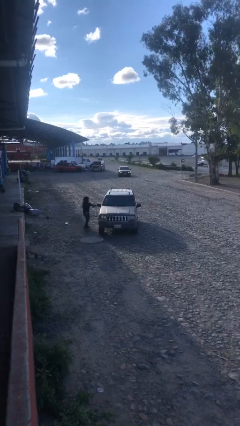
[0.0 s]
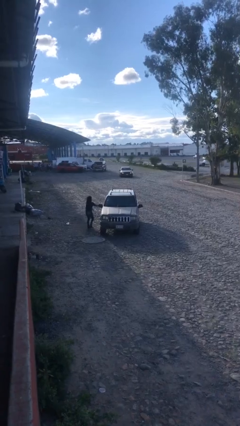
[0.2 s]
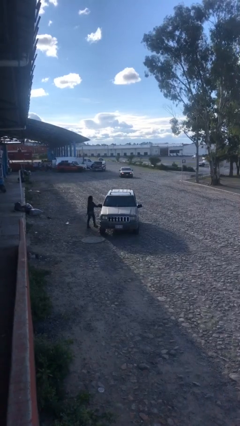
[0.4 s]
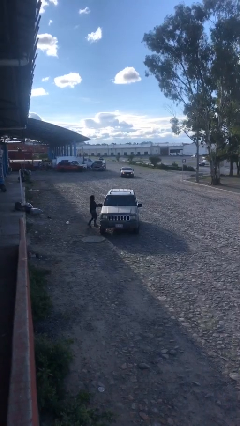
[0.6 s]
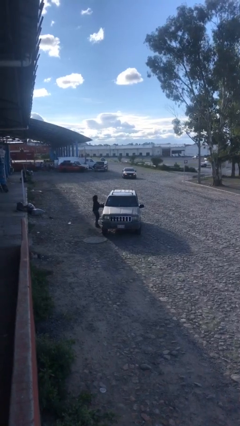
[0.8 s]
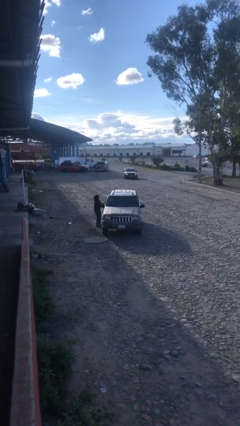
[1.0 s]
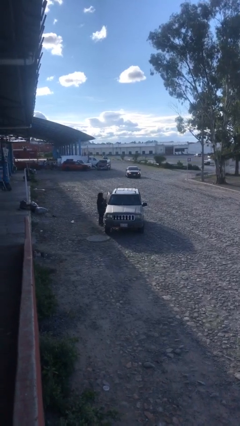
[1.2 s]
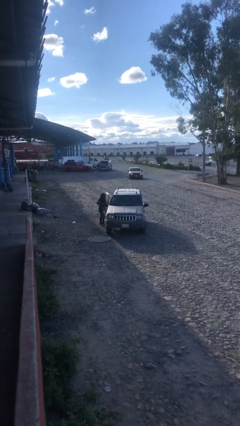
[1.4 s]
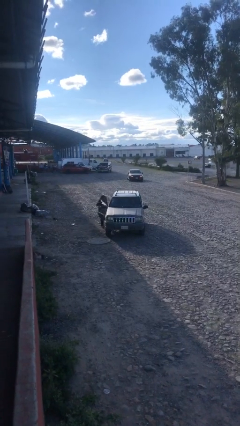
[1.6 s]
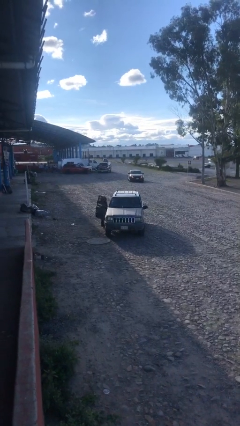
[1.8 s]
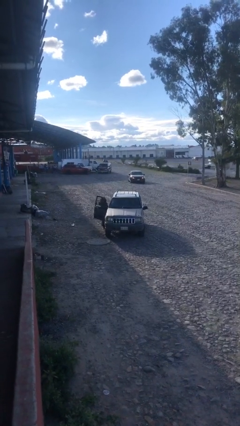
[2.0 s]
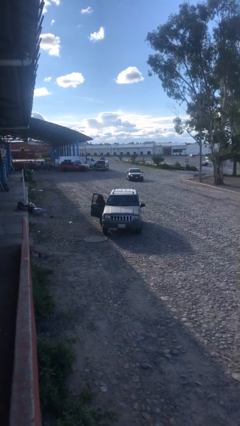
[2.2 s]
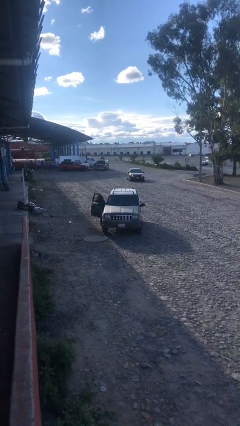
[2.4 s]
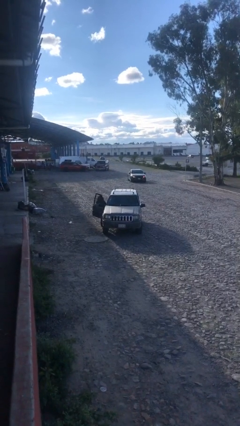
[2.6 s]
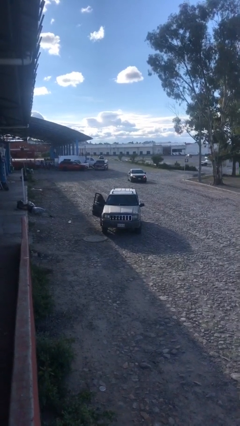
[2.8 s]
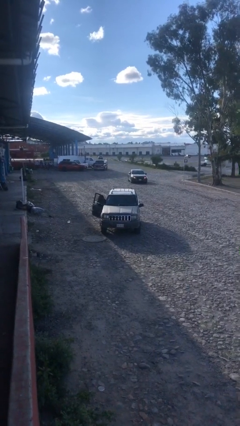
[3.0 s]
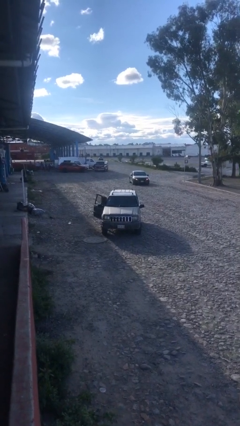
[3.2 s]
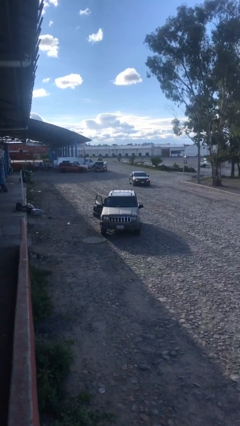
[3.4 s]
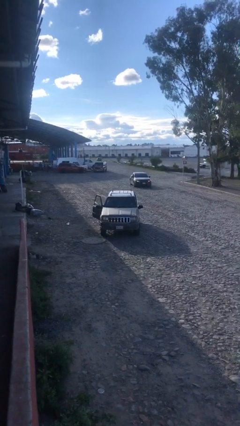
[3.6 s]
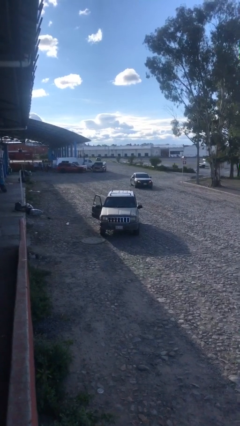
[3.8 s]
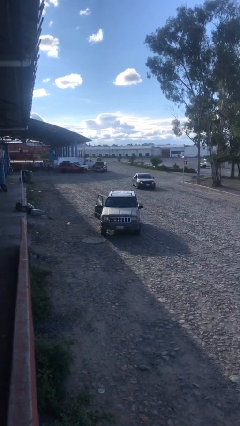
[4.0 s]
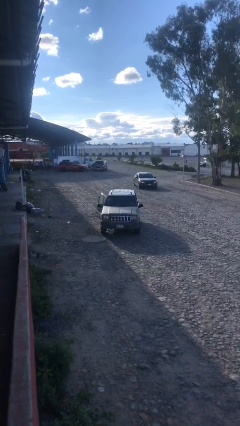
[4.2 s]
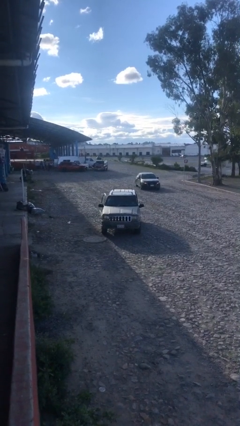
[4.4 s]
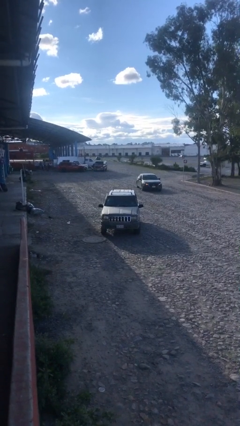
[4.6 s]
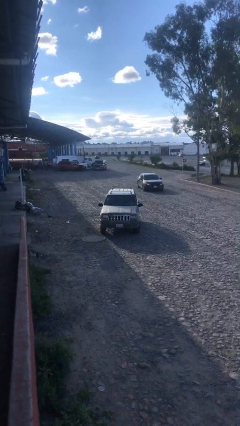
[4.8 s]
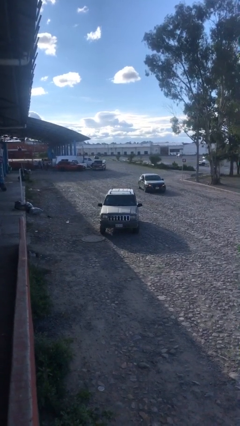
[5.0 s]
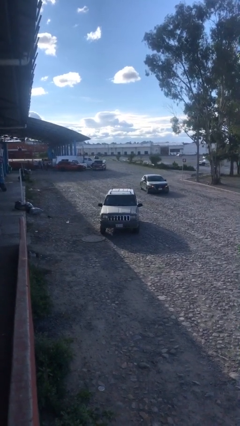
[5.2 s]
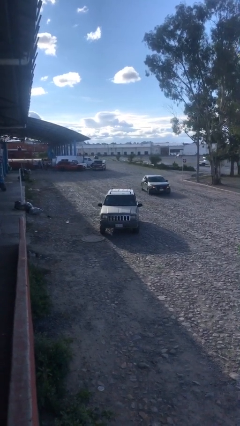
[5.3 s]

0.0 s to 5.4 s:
car picks up person

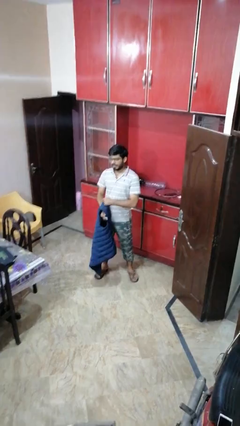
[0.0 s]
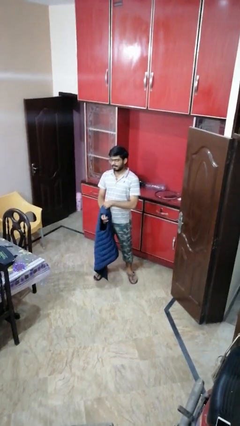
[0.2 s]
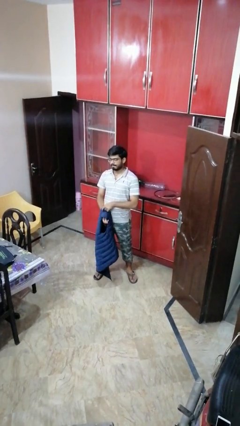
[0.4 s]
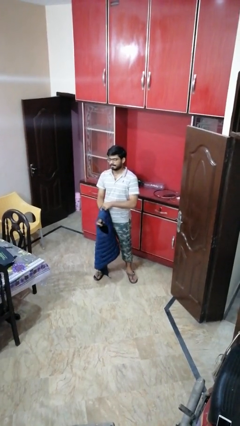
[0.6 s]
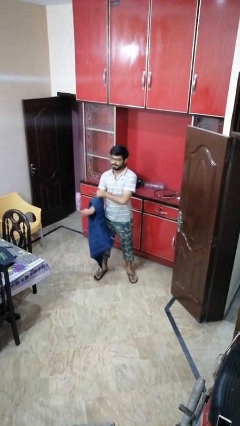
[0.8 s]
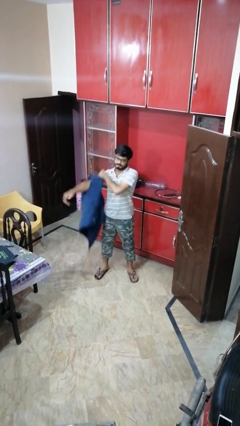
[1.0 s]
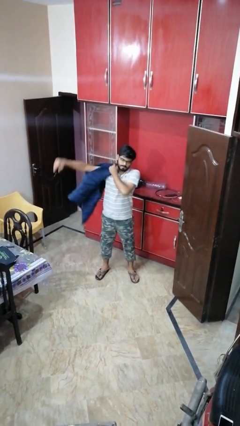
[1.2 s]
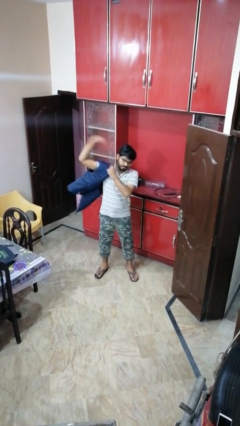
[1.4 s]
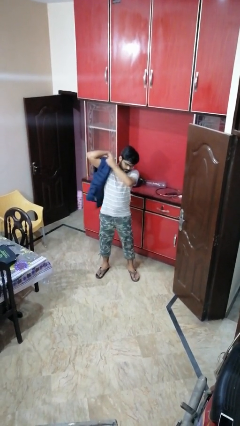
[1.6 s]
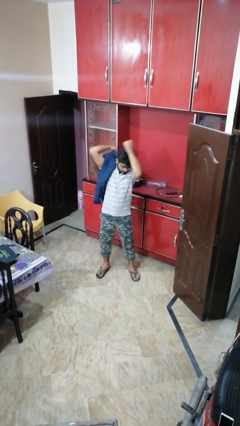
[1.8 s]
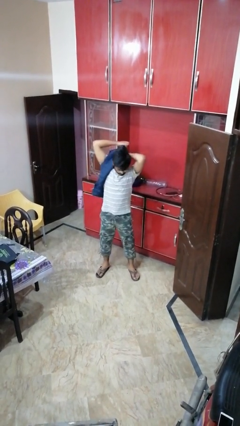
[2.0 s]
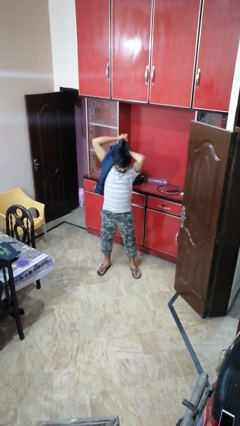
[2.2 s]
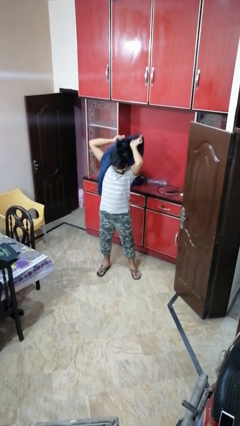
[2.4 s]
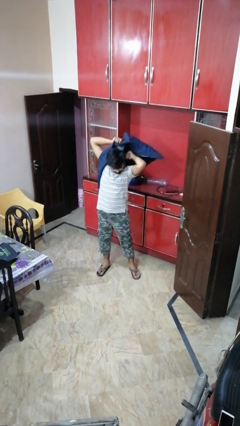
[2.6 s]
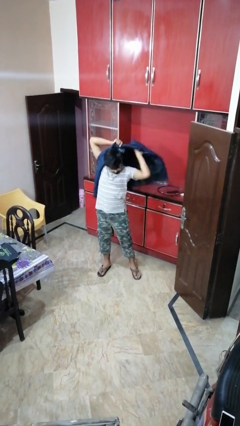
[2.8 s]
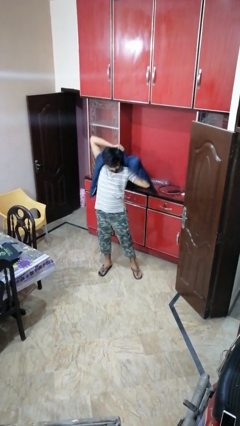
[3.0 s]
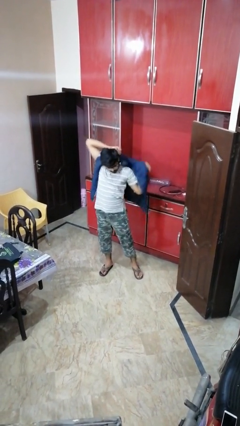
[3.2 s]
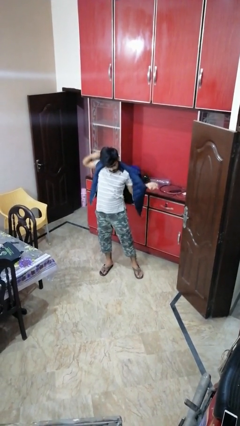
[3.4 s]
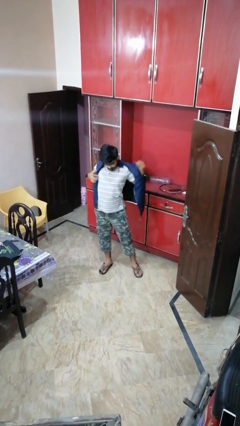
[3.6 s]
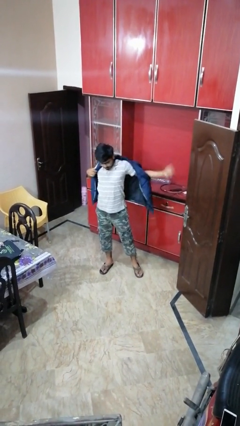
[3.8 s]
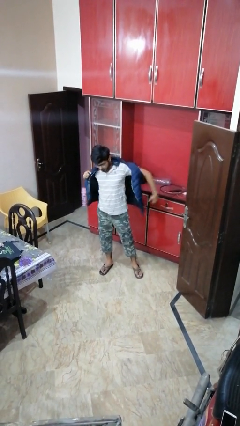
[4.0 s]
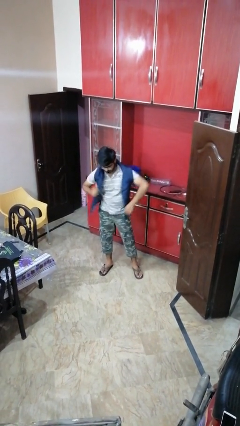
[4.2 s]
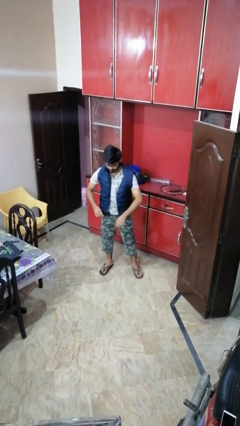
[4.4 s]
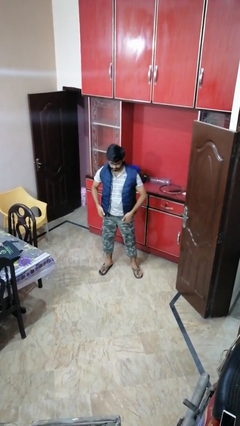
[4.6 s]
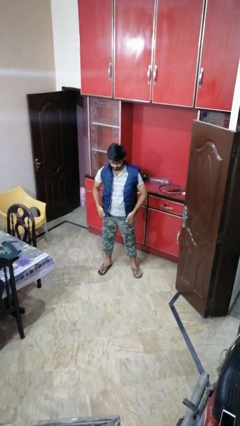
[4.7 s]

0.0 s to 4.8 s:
person puts on jacket

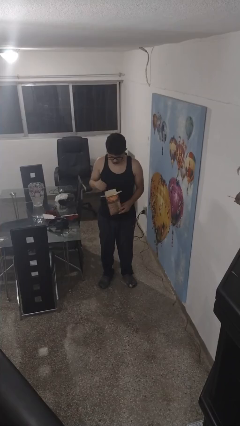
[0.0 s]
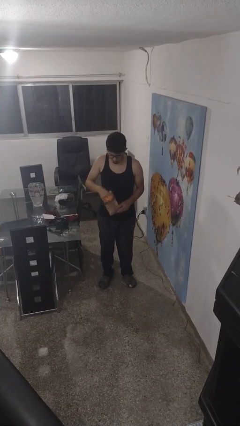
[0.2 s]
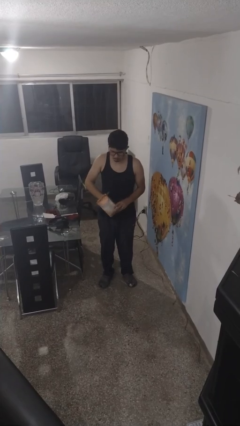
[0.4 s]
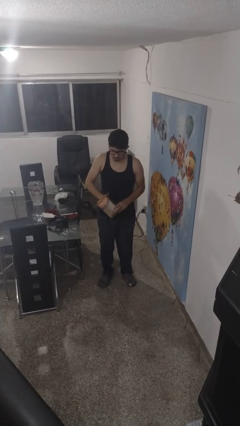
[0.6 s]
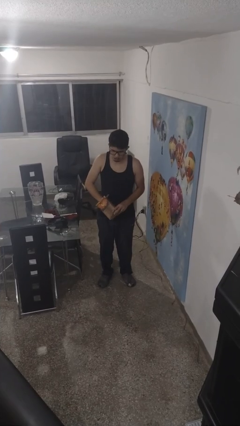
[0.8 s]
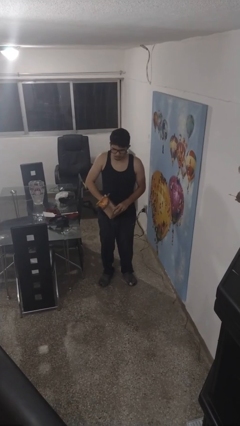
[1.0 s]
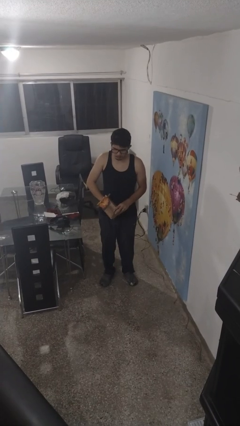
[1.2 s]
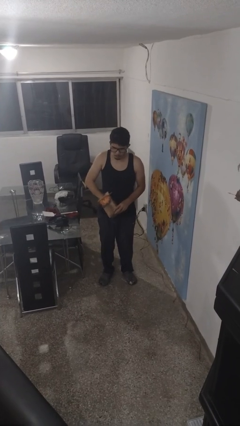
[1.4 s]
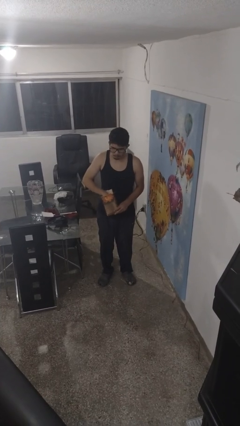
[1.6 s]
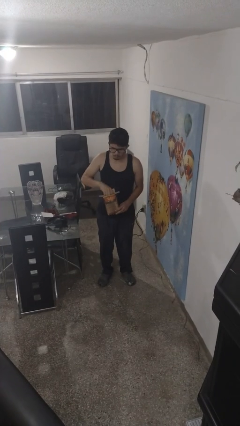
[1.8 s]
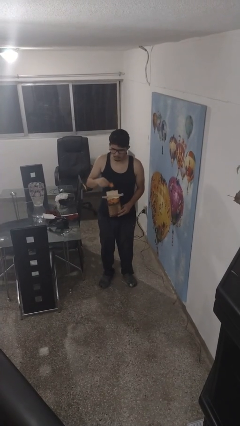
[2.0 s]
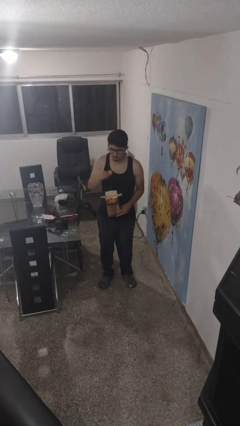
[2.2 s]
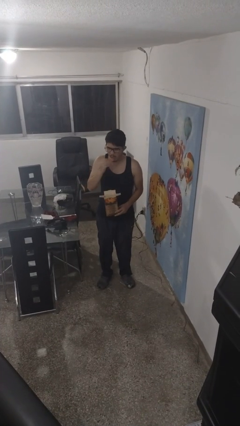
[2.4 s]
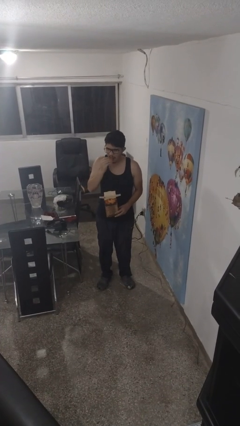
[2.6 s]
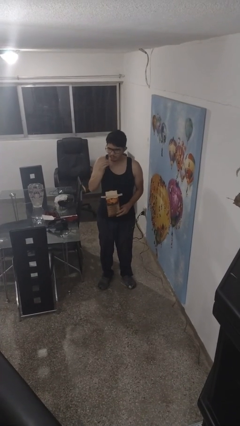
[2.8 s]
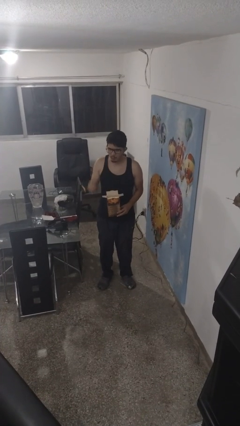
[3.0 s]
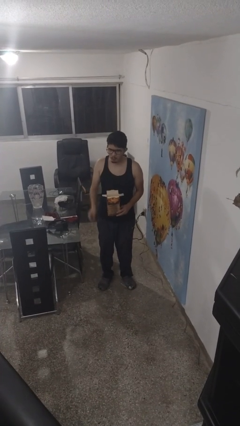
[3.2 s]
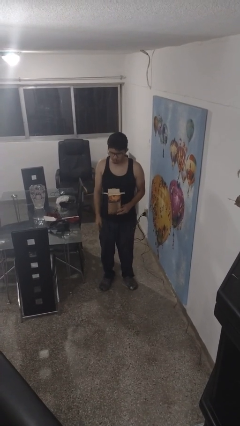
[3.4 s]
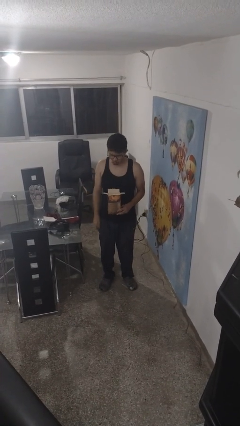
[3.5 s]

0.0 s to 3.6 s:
person eats snack from bag

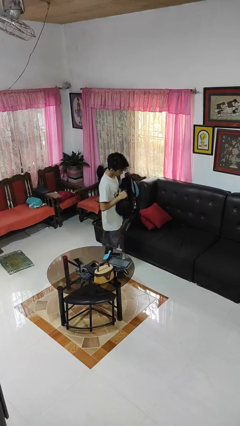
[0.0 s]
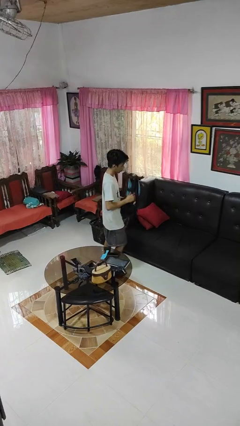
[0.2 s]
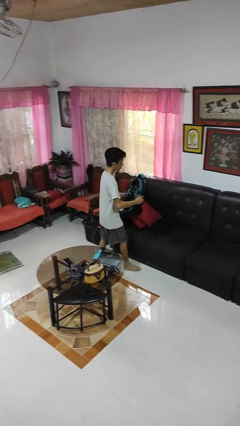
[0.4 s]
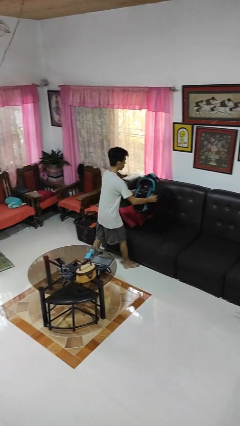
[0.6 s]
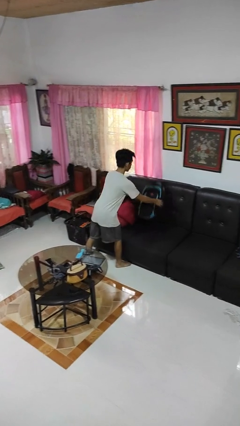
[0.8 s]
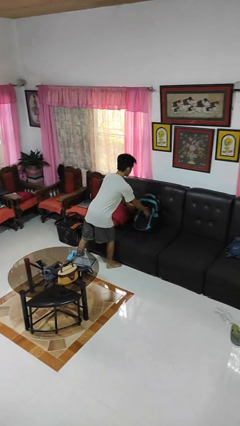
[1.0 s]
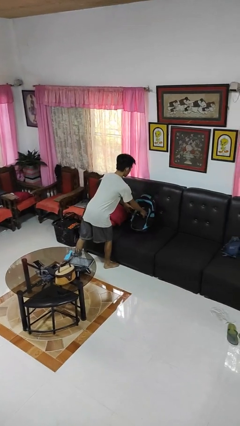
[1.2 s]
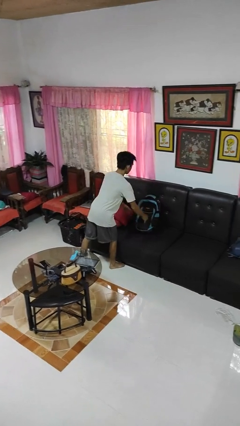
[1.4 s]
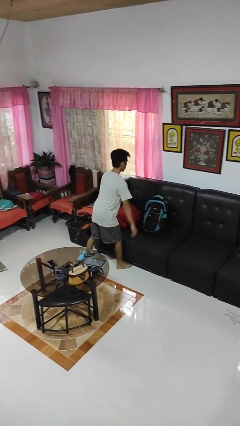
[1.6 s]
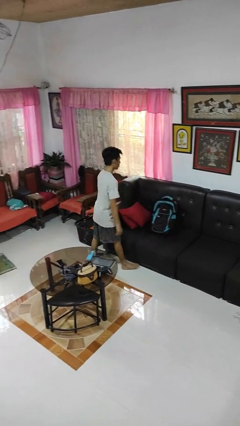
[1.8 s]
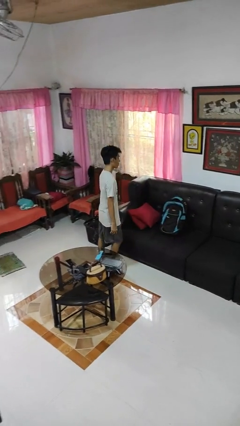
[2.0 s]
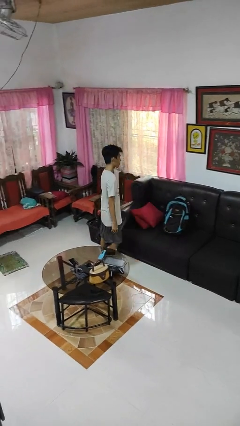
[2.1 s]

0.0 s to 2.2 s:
person puts down object on couch

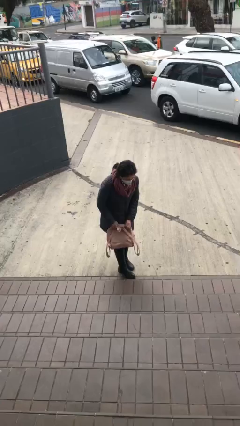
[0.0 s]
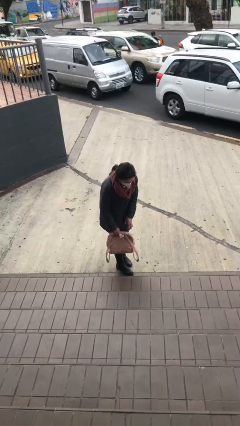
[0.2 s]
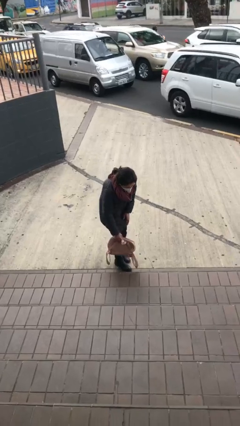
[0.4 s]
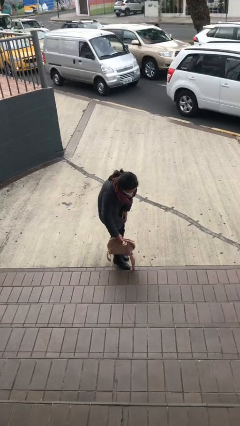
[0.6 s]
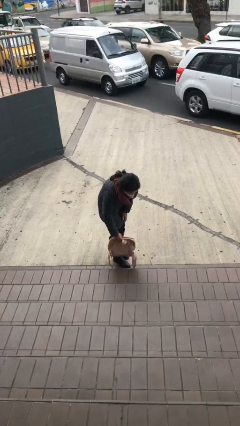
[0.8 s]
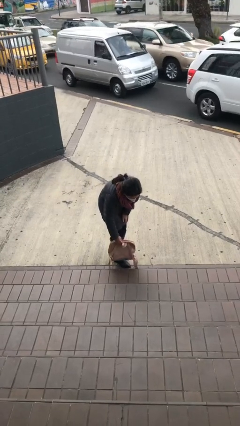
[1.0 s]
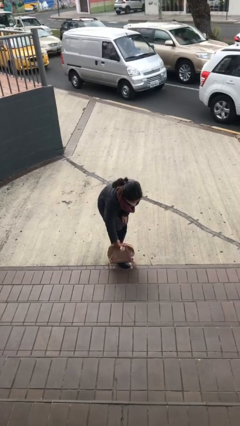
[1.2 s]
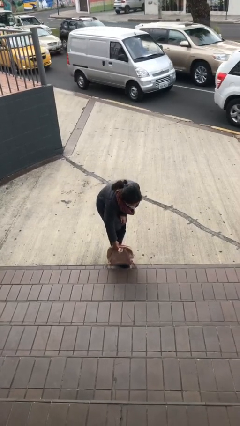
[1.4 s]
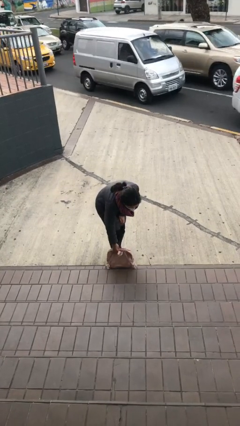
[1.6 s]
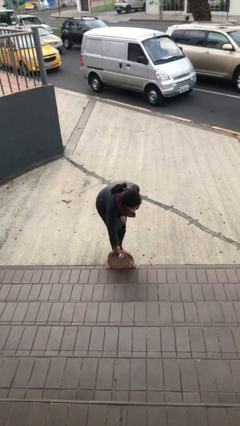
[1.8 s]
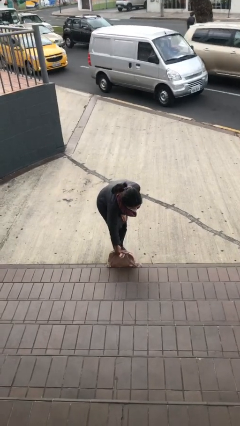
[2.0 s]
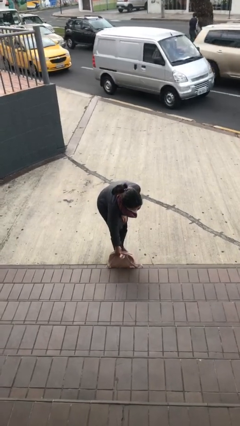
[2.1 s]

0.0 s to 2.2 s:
person puts down object on floor
